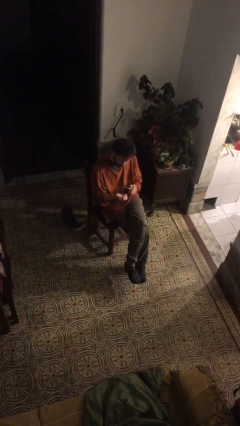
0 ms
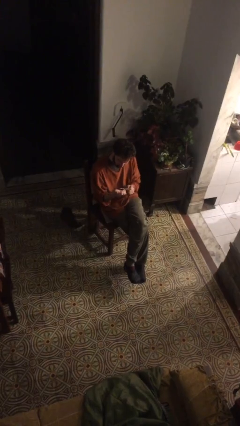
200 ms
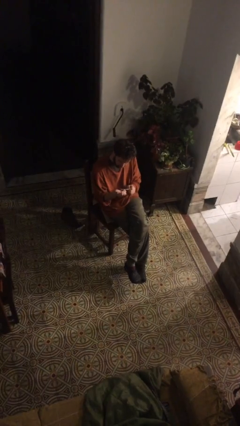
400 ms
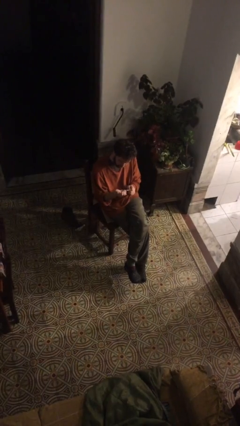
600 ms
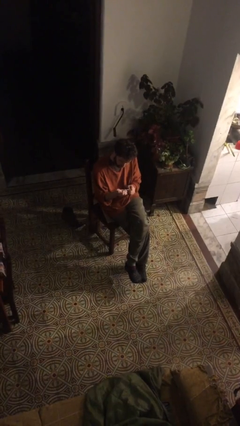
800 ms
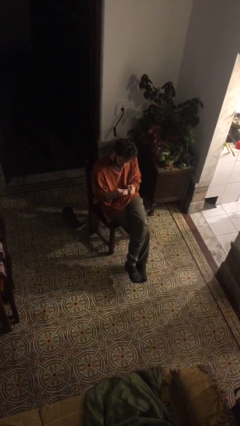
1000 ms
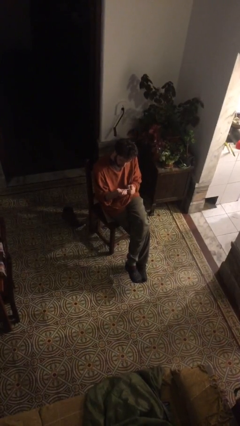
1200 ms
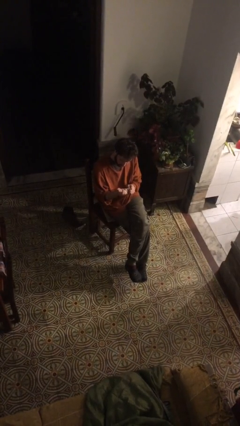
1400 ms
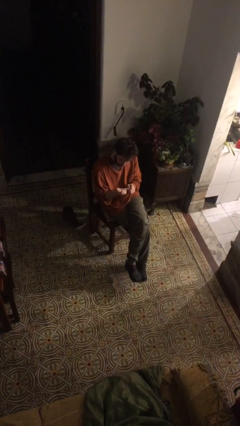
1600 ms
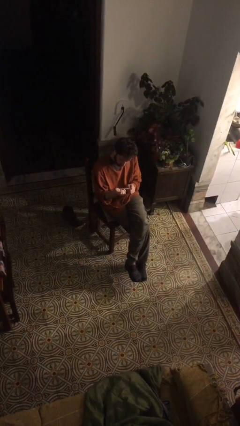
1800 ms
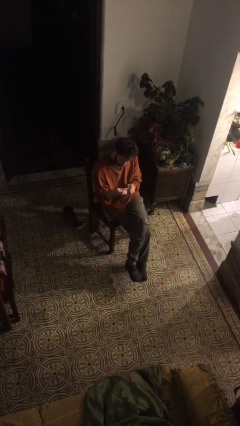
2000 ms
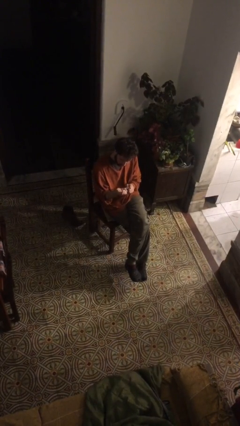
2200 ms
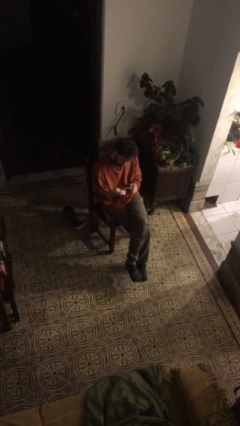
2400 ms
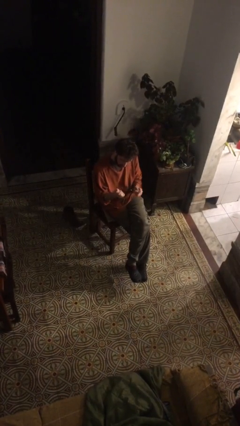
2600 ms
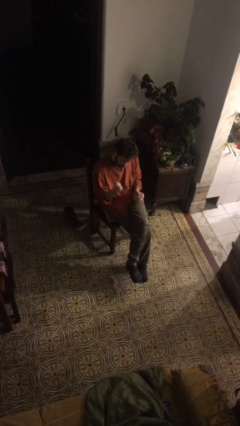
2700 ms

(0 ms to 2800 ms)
person files fingernails

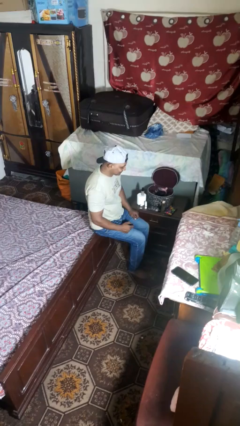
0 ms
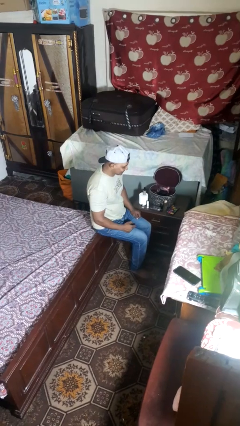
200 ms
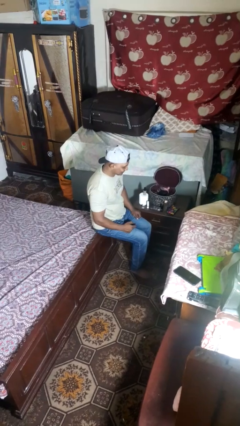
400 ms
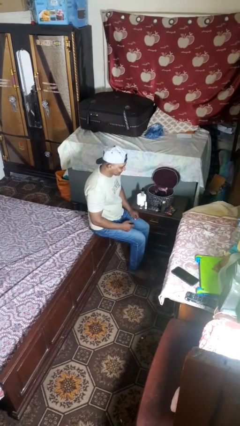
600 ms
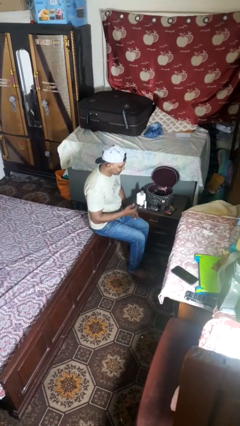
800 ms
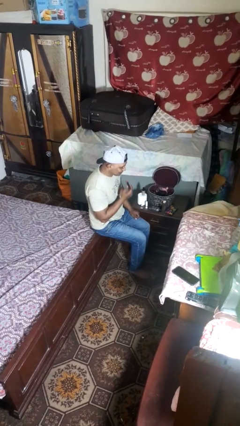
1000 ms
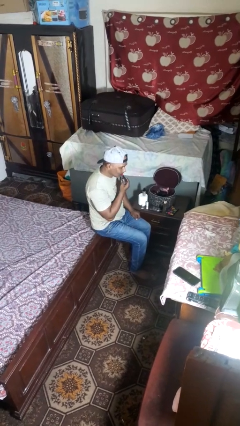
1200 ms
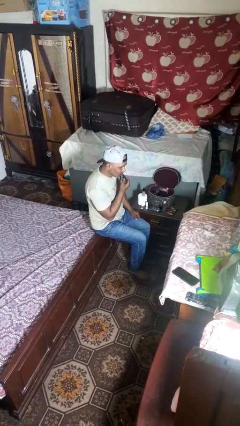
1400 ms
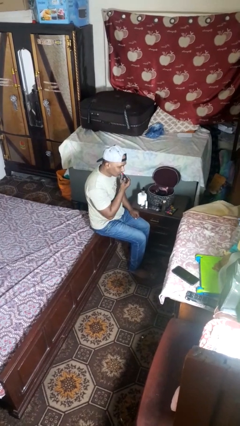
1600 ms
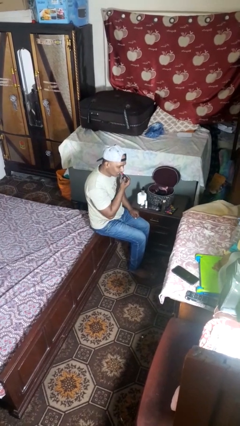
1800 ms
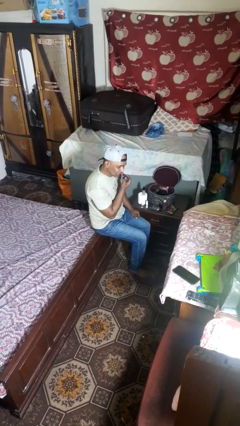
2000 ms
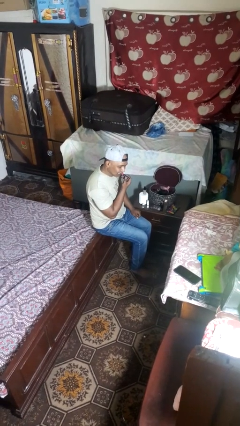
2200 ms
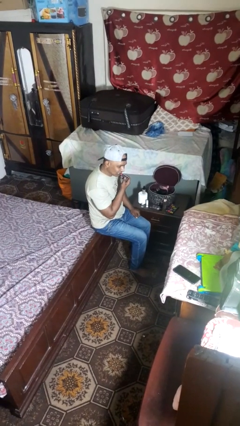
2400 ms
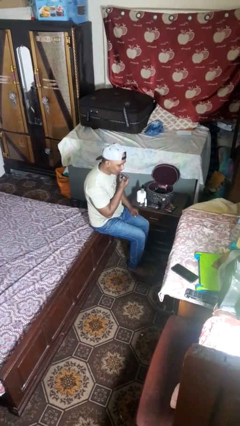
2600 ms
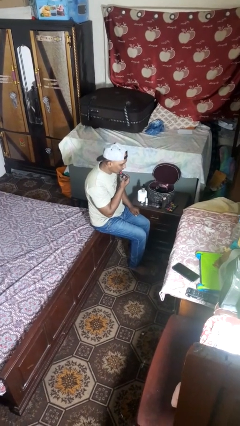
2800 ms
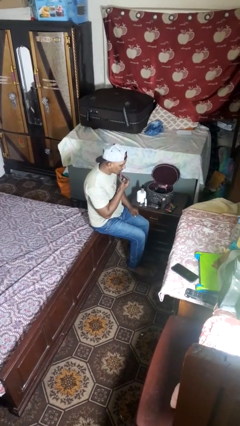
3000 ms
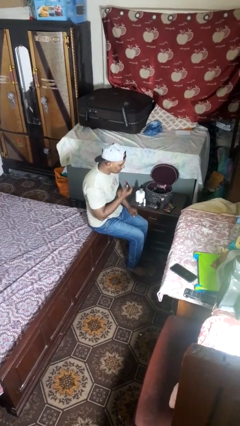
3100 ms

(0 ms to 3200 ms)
person applies lip makeup

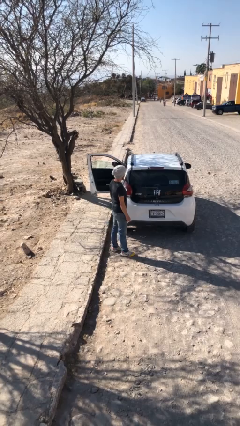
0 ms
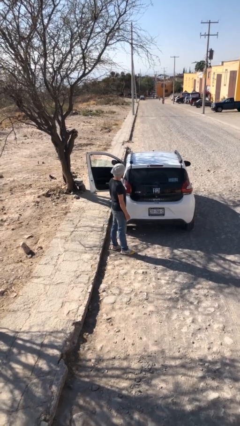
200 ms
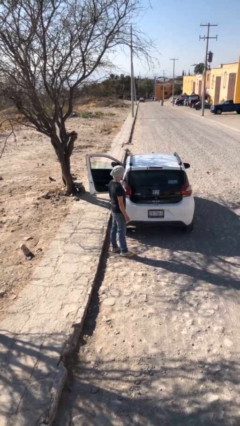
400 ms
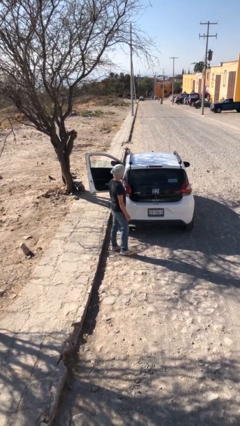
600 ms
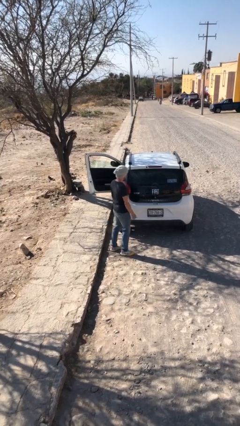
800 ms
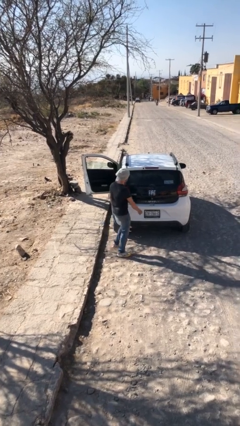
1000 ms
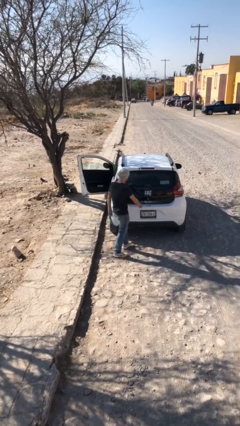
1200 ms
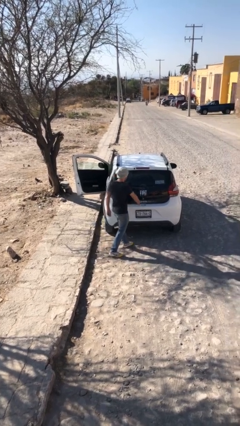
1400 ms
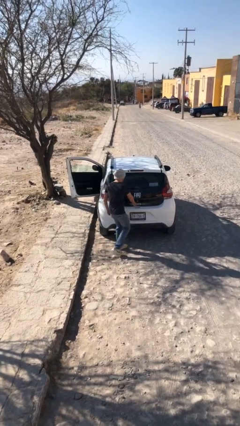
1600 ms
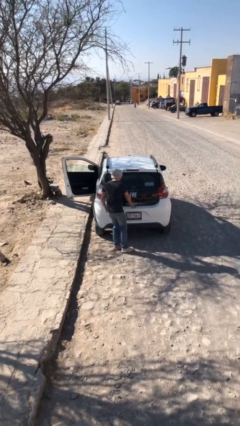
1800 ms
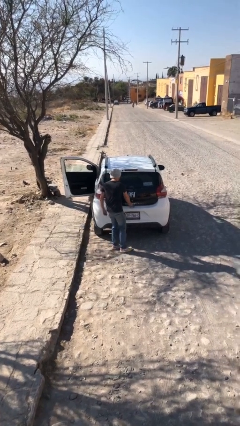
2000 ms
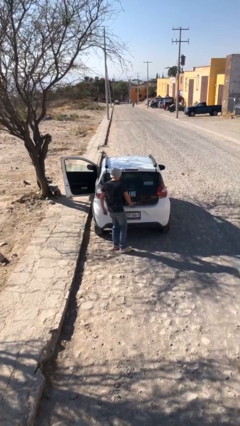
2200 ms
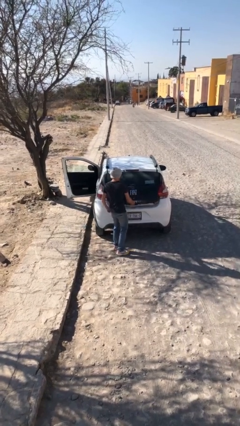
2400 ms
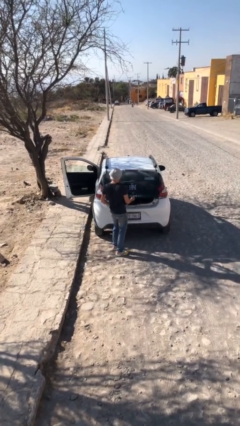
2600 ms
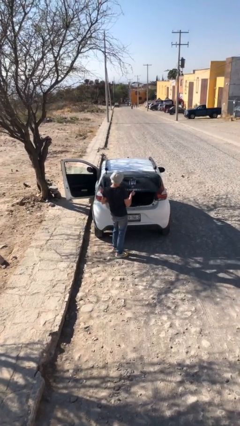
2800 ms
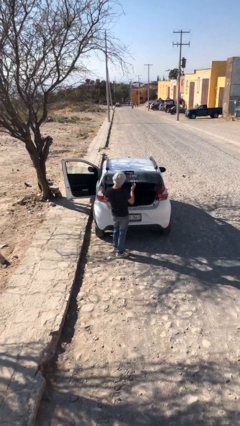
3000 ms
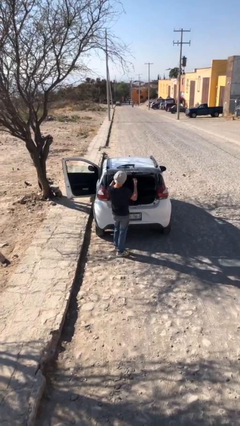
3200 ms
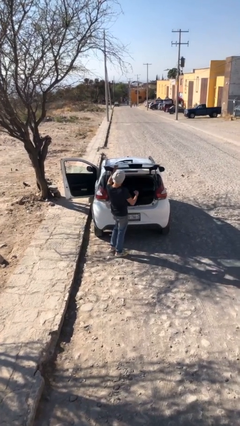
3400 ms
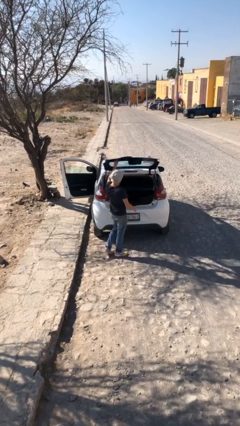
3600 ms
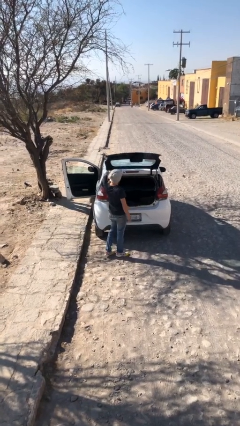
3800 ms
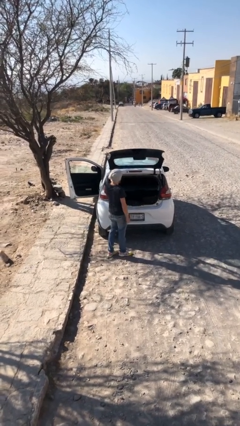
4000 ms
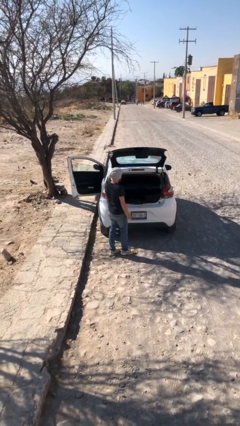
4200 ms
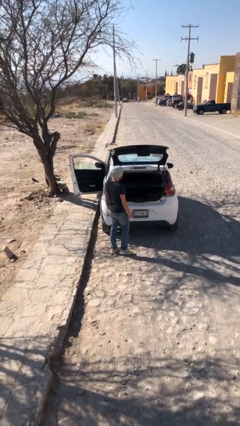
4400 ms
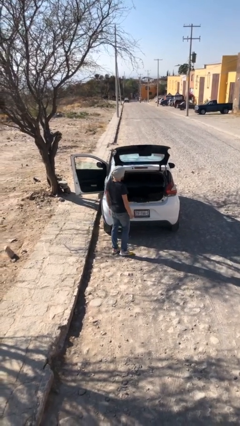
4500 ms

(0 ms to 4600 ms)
person opens car trunk

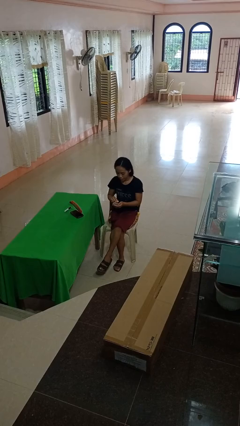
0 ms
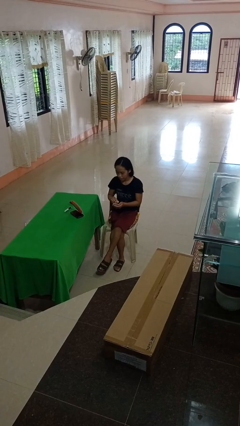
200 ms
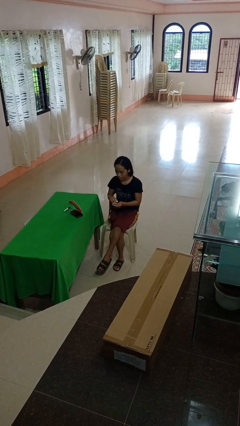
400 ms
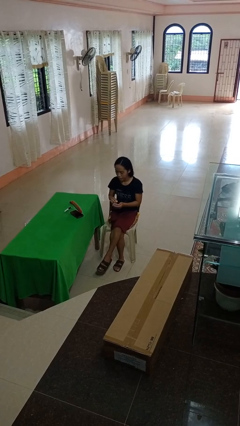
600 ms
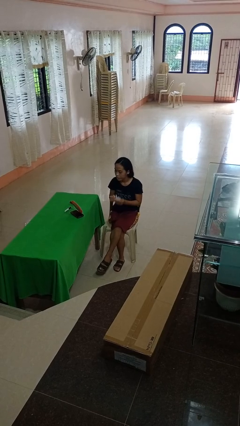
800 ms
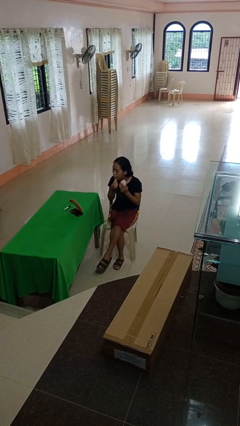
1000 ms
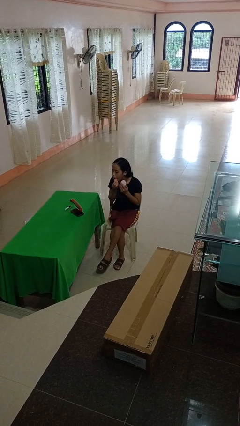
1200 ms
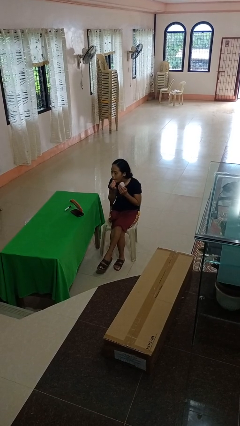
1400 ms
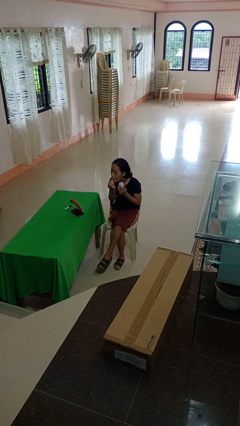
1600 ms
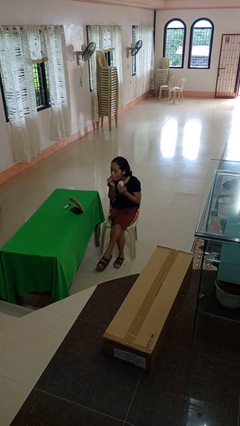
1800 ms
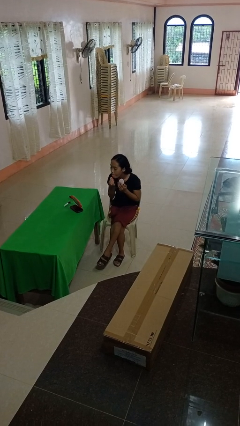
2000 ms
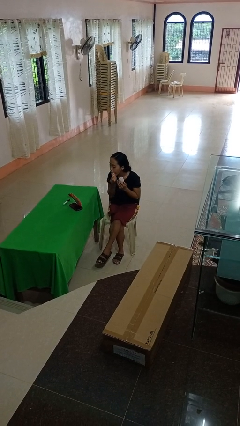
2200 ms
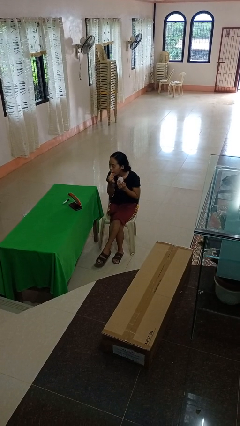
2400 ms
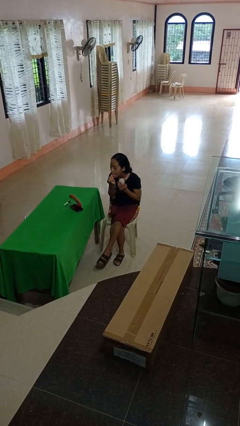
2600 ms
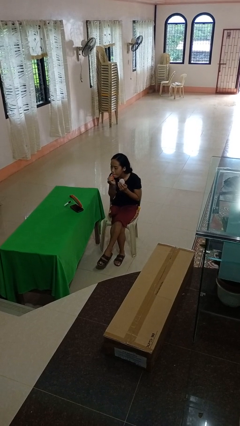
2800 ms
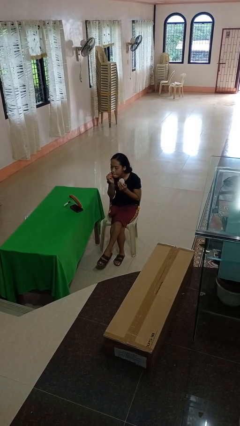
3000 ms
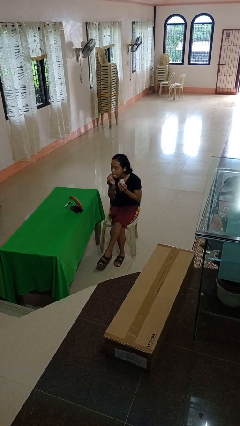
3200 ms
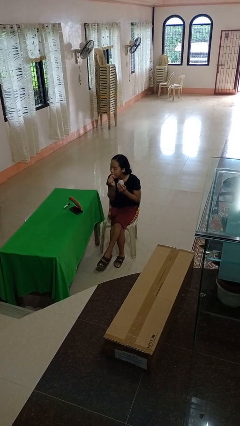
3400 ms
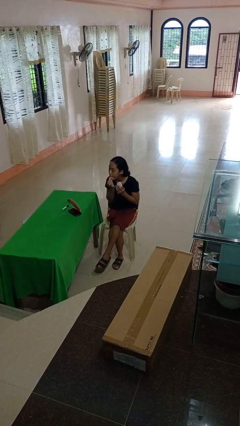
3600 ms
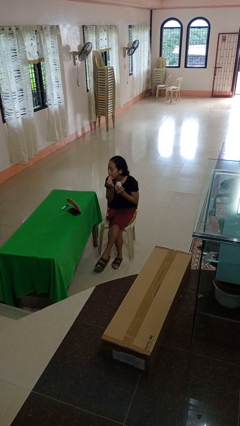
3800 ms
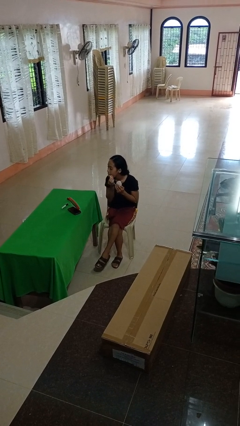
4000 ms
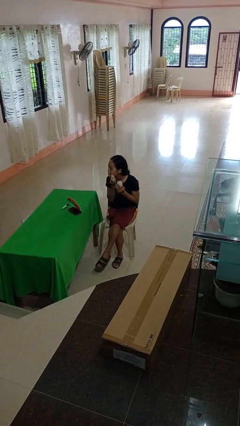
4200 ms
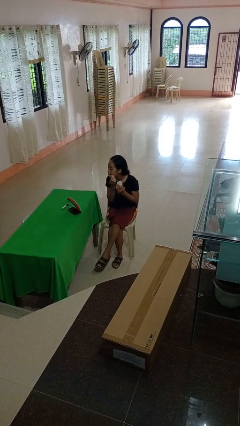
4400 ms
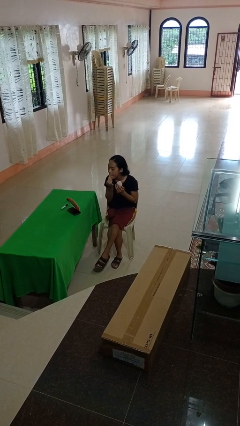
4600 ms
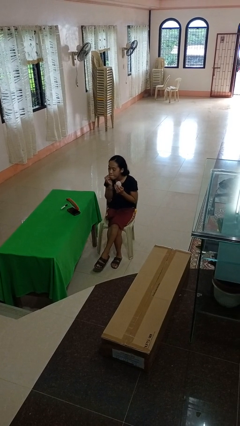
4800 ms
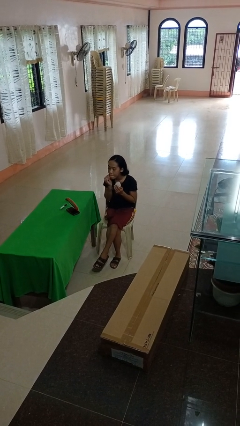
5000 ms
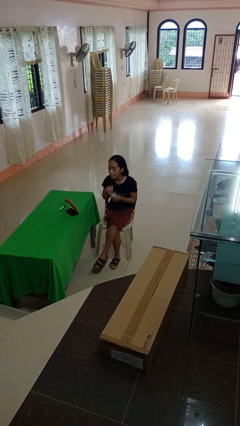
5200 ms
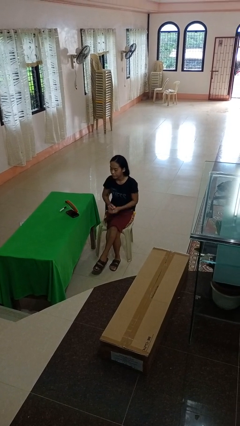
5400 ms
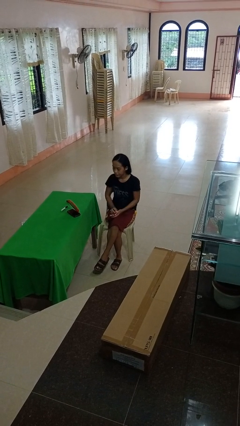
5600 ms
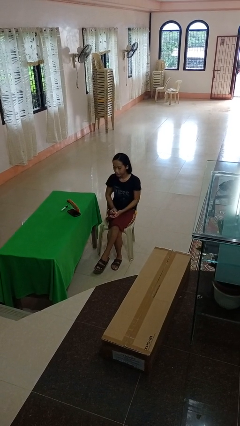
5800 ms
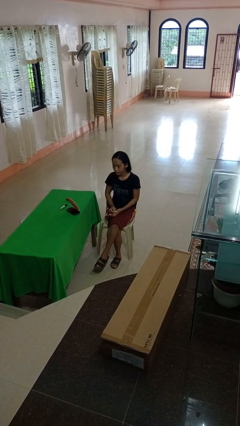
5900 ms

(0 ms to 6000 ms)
person applies foundation makeup

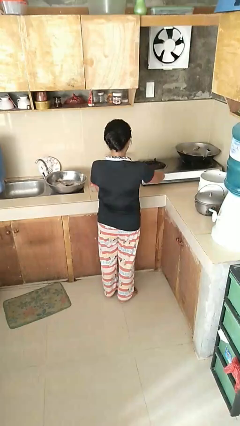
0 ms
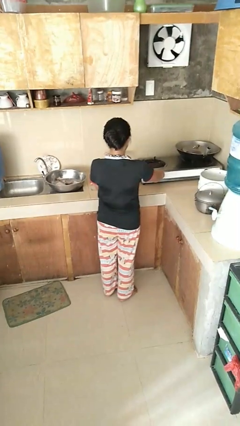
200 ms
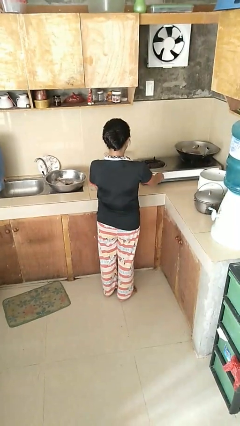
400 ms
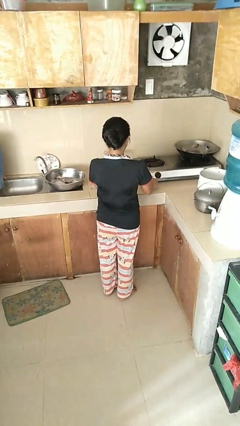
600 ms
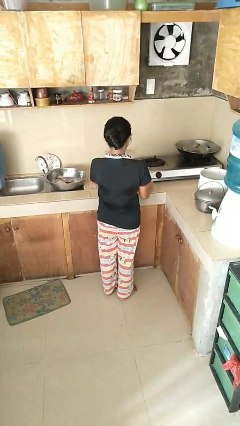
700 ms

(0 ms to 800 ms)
person turns off stovetop
